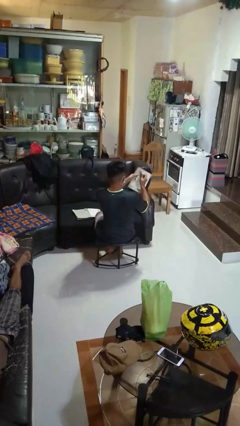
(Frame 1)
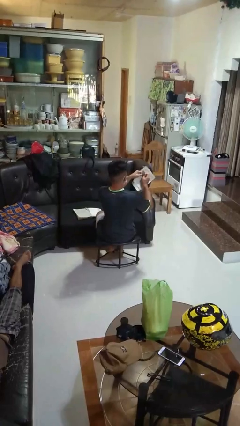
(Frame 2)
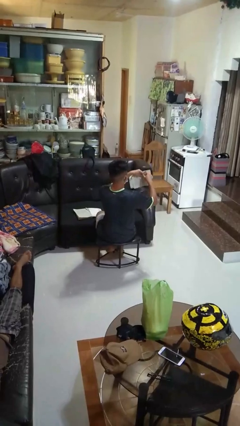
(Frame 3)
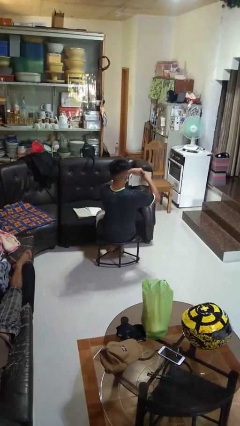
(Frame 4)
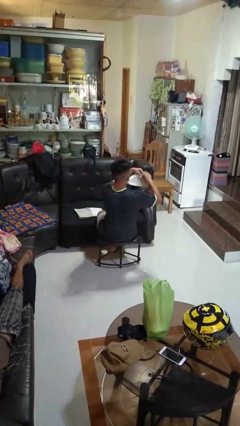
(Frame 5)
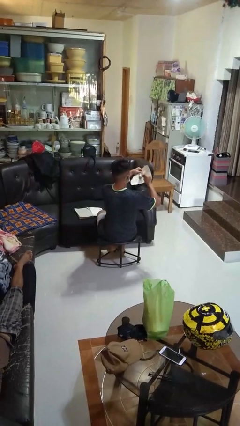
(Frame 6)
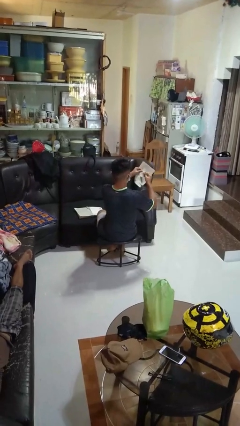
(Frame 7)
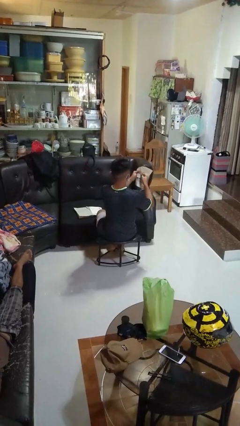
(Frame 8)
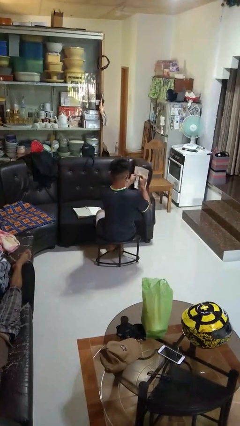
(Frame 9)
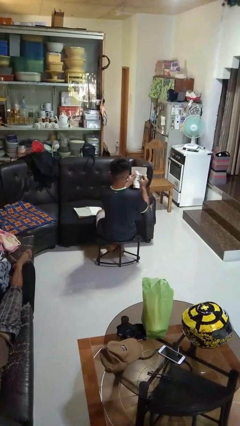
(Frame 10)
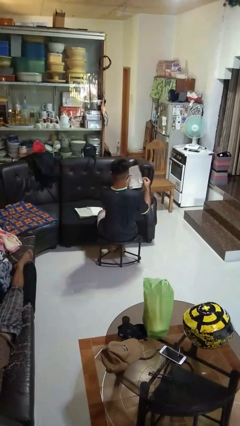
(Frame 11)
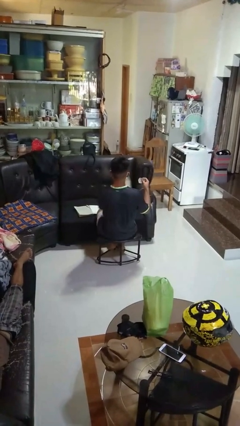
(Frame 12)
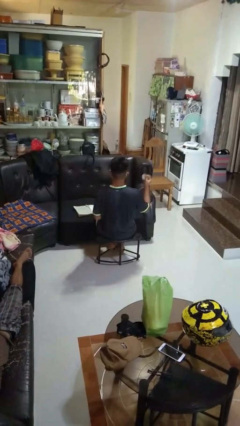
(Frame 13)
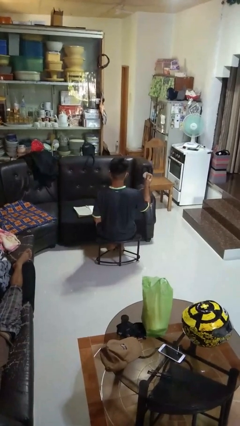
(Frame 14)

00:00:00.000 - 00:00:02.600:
person tears paper

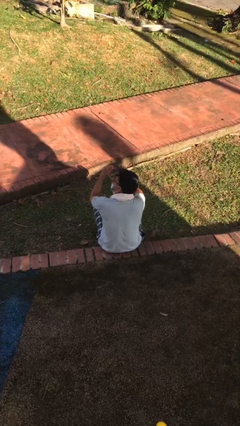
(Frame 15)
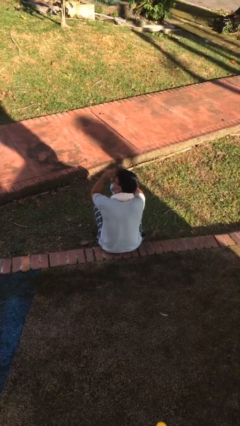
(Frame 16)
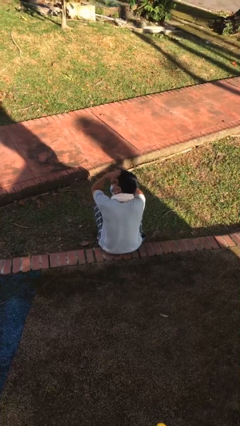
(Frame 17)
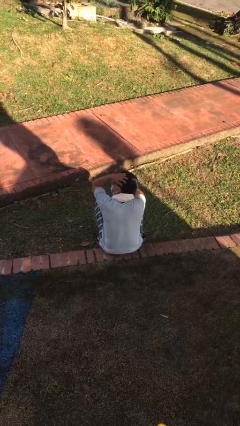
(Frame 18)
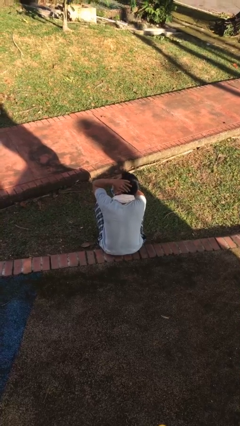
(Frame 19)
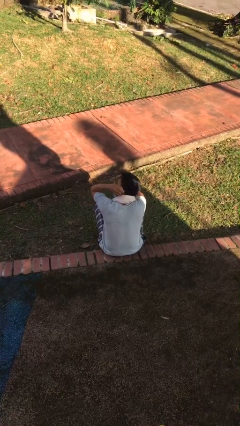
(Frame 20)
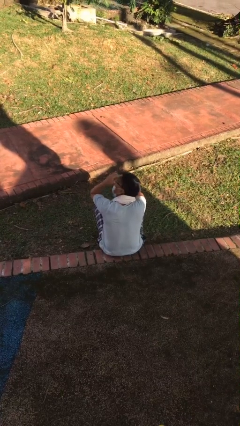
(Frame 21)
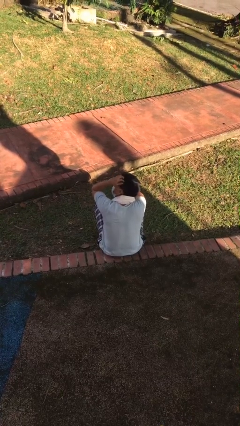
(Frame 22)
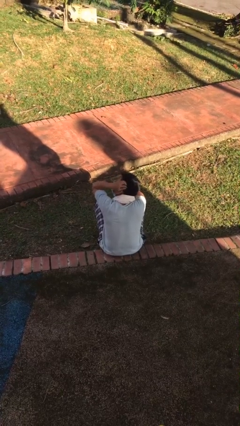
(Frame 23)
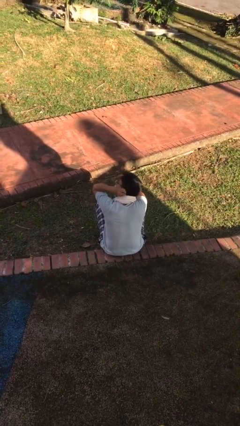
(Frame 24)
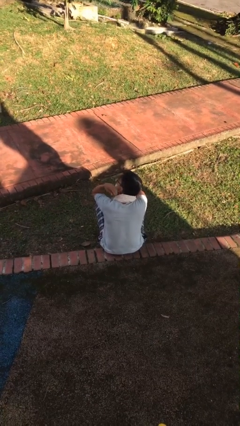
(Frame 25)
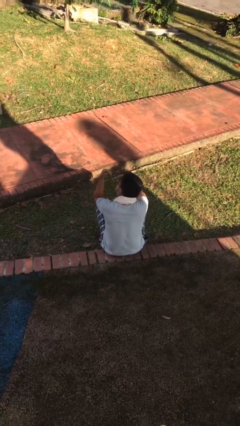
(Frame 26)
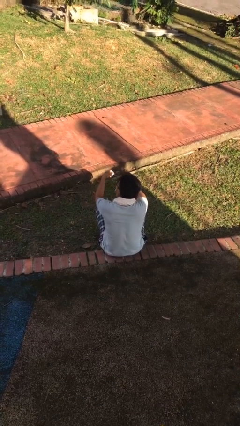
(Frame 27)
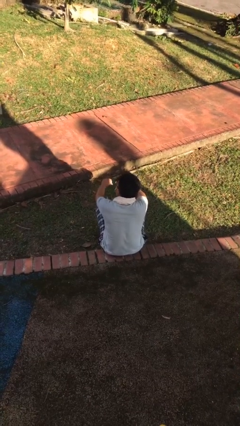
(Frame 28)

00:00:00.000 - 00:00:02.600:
person strokes hair

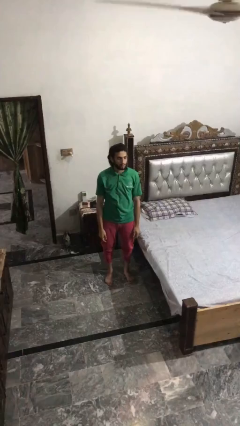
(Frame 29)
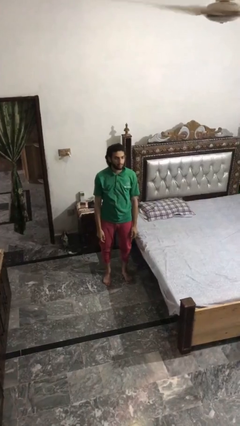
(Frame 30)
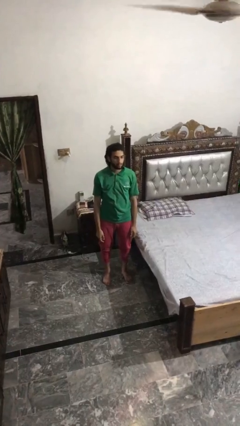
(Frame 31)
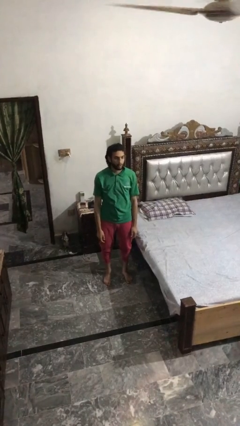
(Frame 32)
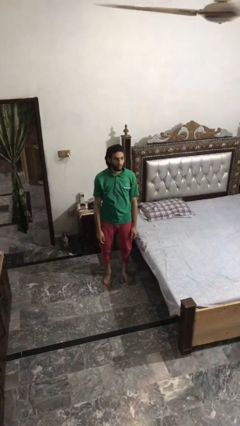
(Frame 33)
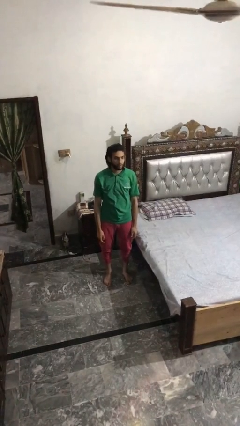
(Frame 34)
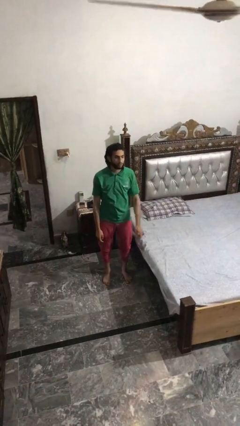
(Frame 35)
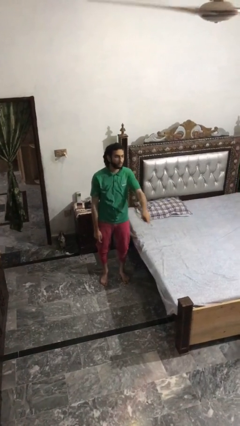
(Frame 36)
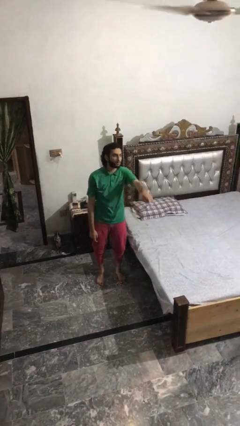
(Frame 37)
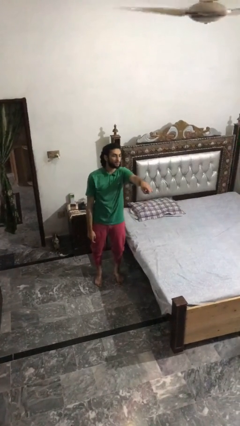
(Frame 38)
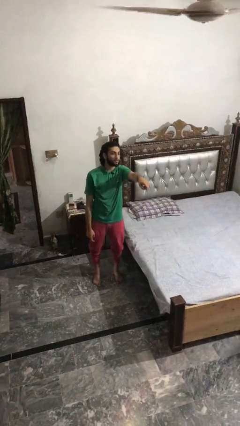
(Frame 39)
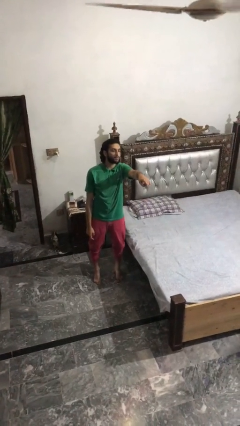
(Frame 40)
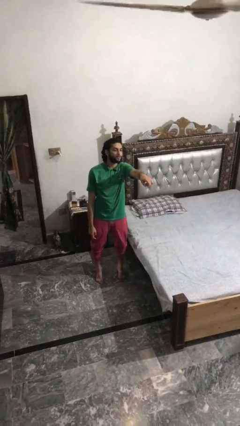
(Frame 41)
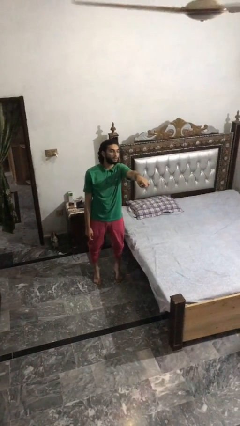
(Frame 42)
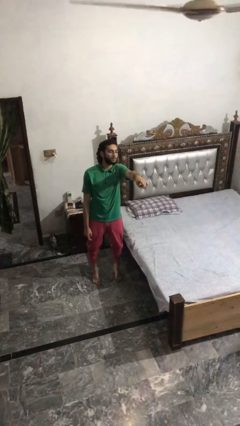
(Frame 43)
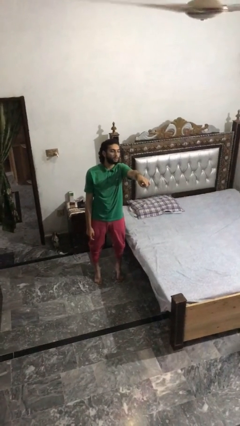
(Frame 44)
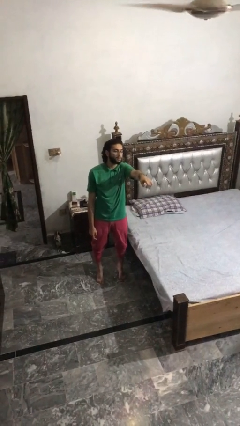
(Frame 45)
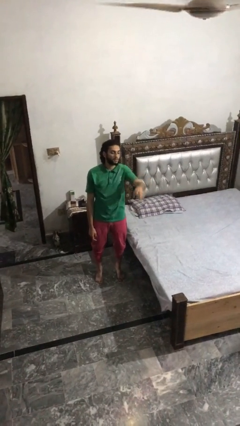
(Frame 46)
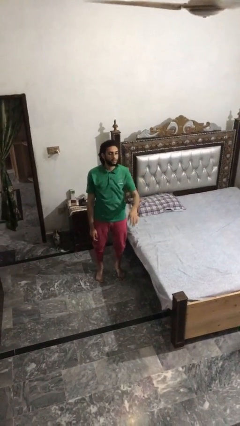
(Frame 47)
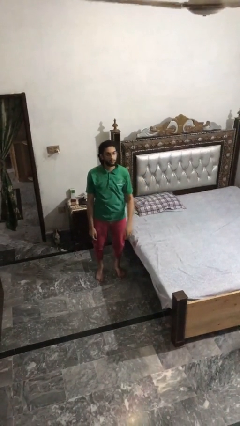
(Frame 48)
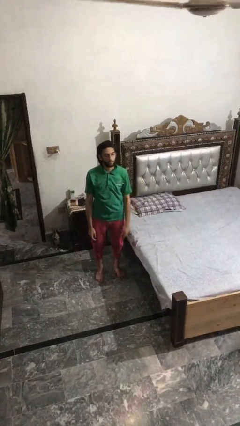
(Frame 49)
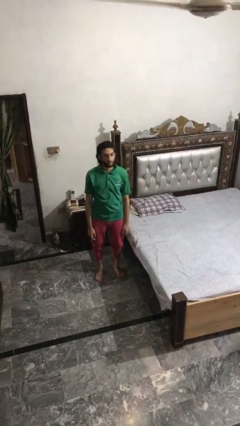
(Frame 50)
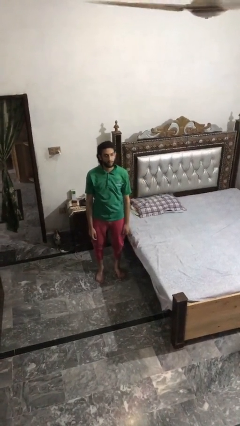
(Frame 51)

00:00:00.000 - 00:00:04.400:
person points at person

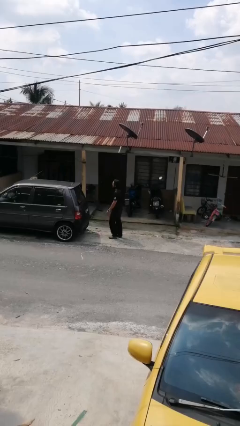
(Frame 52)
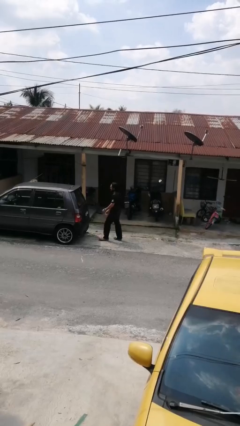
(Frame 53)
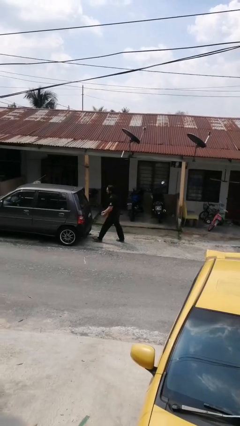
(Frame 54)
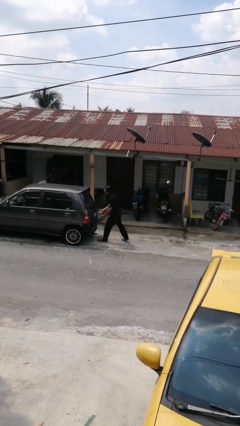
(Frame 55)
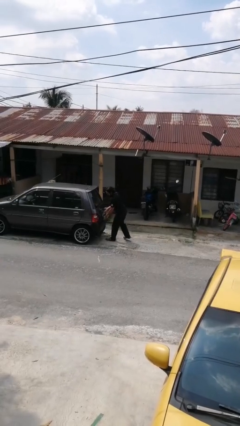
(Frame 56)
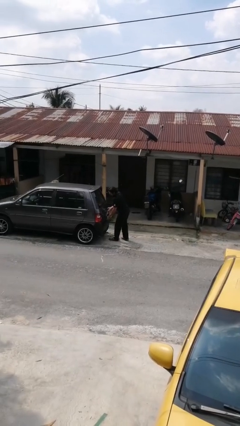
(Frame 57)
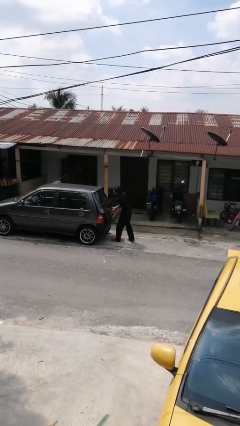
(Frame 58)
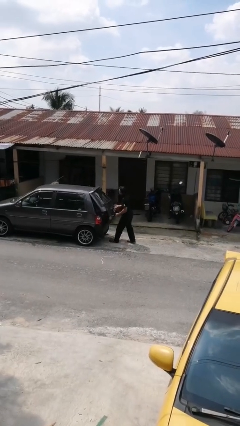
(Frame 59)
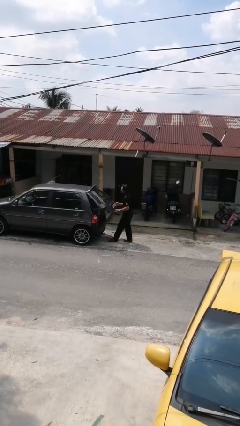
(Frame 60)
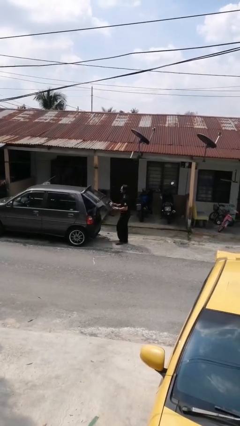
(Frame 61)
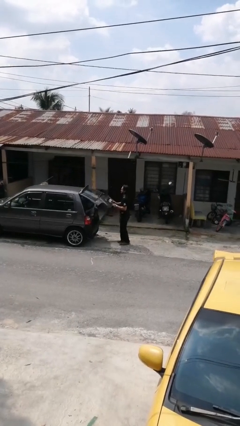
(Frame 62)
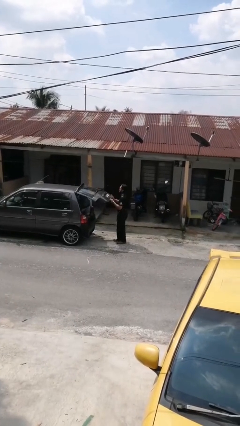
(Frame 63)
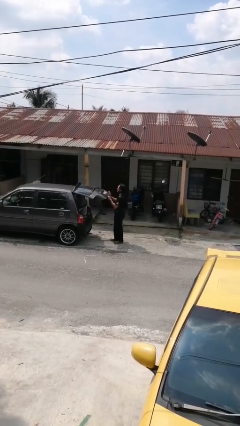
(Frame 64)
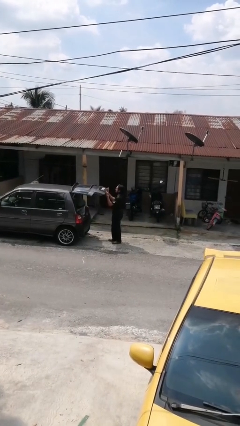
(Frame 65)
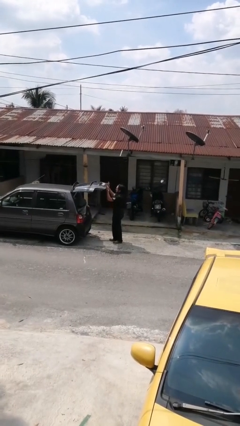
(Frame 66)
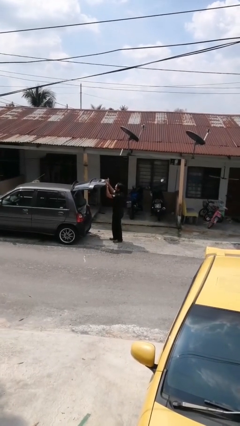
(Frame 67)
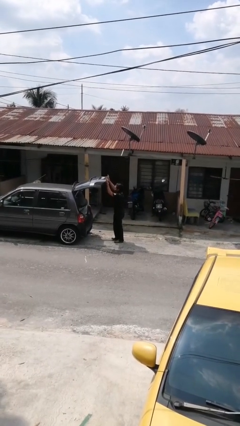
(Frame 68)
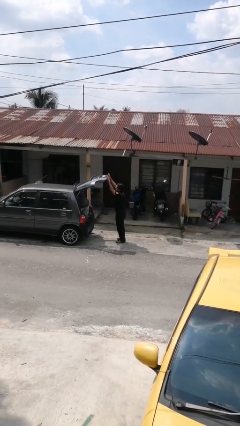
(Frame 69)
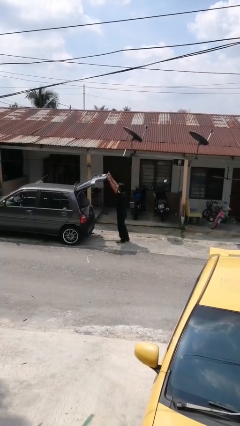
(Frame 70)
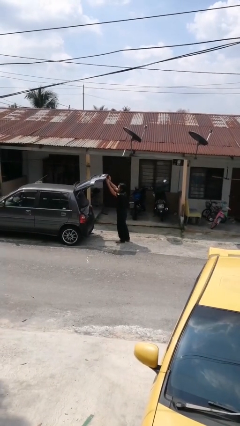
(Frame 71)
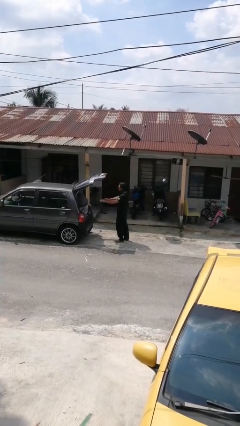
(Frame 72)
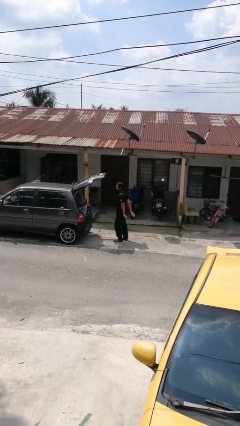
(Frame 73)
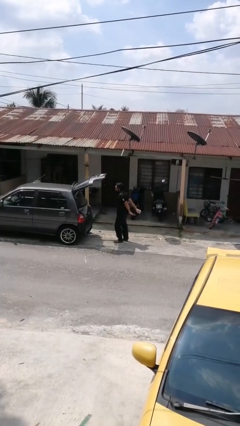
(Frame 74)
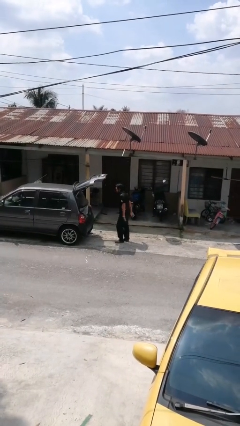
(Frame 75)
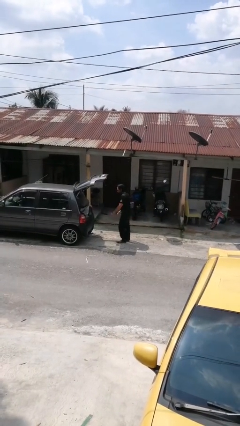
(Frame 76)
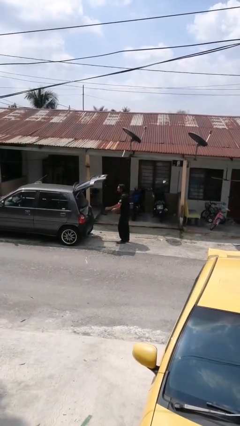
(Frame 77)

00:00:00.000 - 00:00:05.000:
person closes car trunk

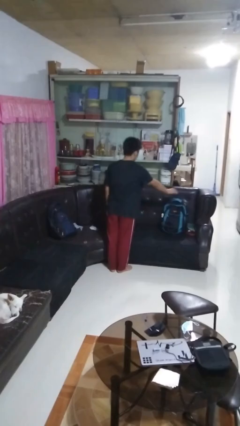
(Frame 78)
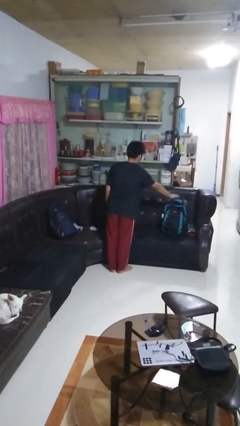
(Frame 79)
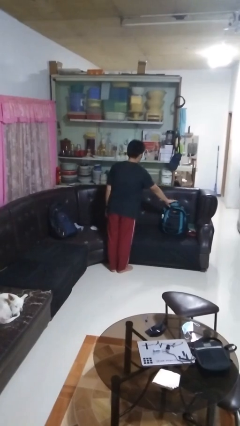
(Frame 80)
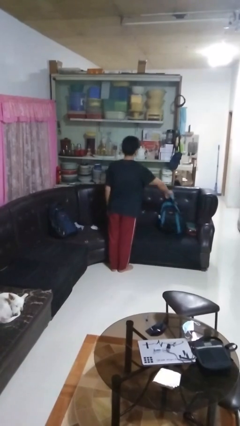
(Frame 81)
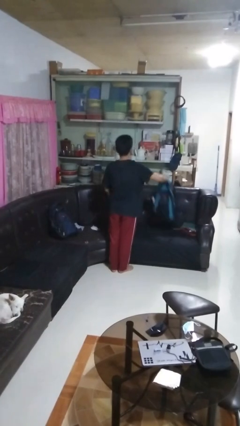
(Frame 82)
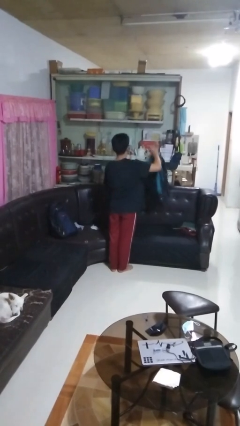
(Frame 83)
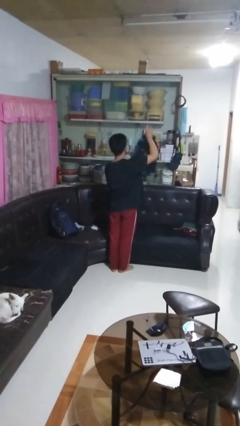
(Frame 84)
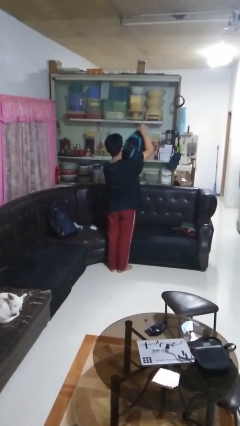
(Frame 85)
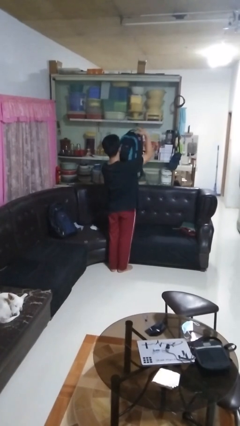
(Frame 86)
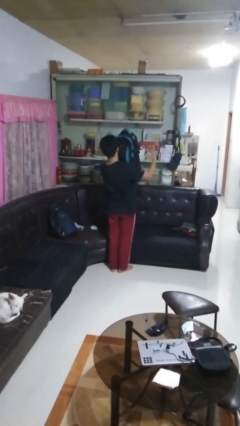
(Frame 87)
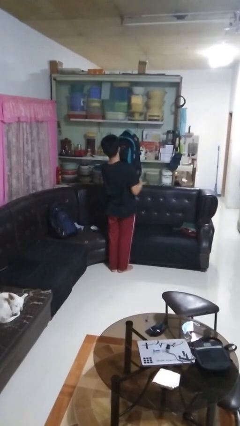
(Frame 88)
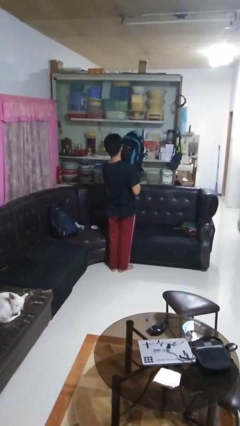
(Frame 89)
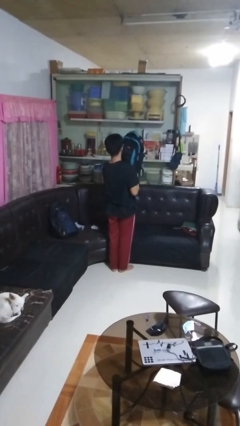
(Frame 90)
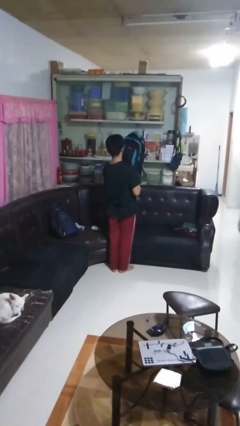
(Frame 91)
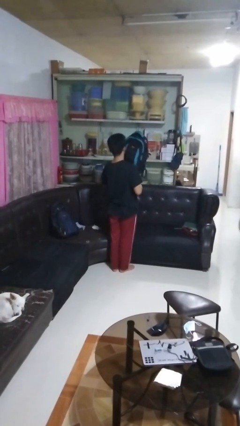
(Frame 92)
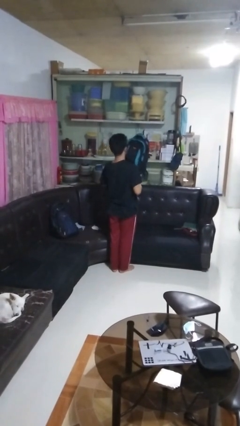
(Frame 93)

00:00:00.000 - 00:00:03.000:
person picks up object from couch

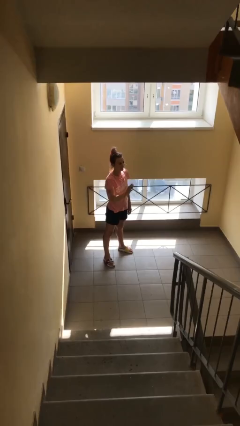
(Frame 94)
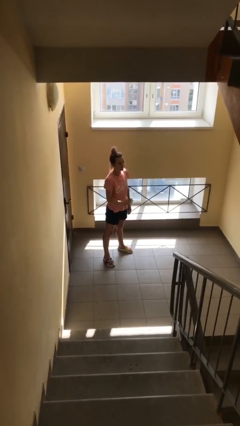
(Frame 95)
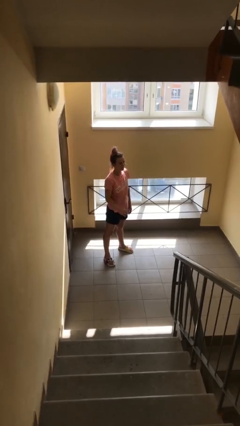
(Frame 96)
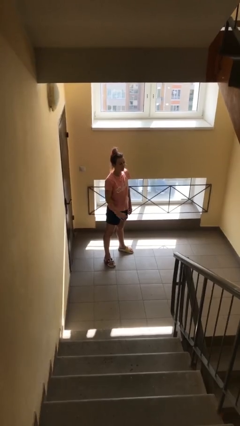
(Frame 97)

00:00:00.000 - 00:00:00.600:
person gestures lower hand
